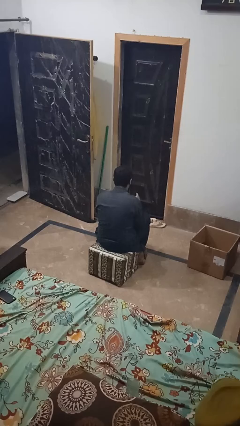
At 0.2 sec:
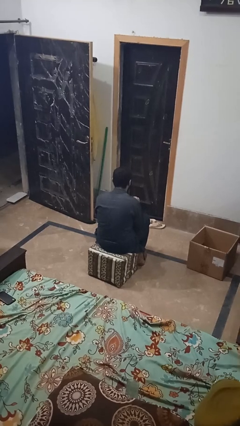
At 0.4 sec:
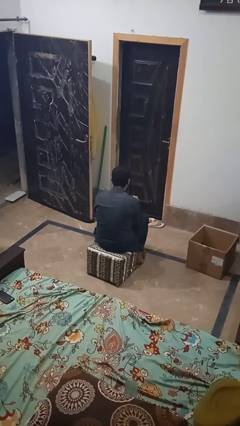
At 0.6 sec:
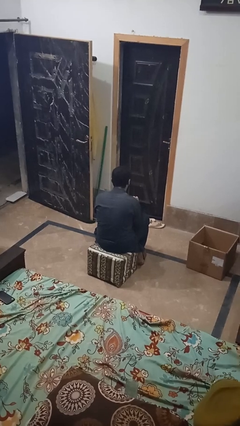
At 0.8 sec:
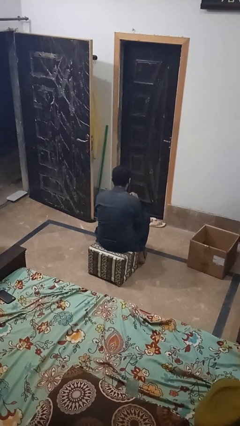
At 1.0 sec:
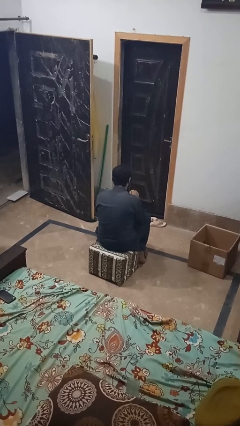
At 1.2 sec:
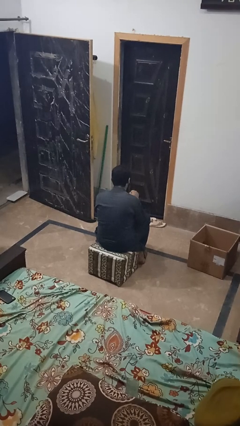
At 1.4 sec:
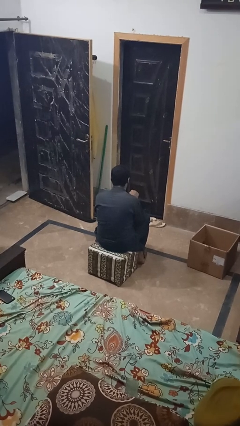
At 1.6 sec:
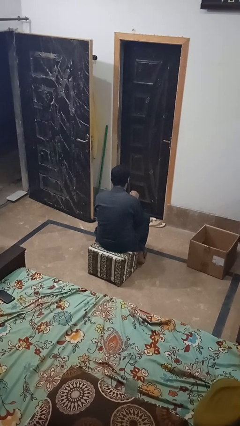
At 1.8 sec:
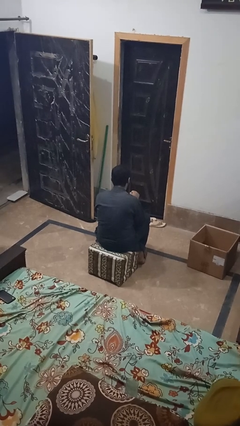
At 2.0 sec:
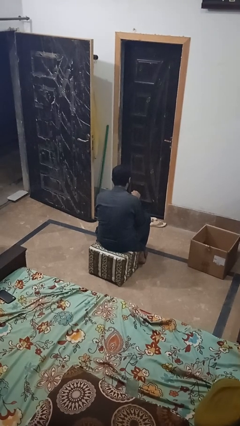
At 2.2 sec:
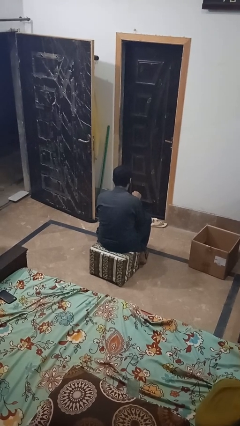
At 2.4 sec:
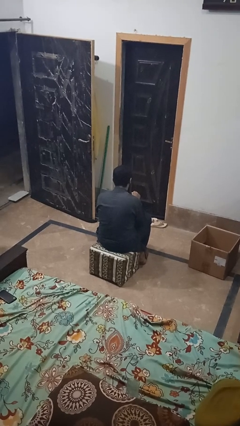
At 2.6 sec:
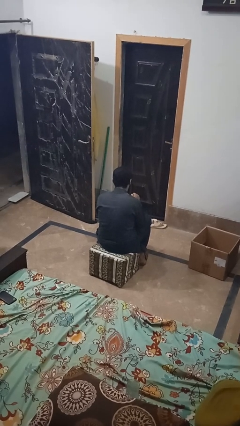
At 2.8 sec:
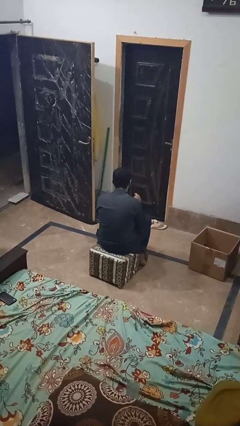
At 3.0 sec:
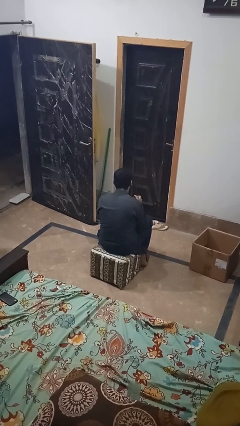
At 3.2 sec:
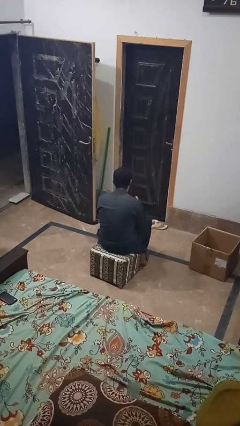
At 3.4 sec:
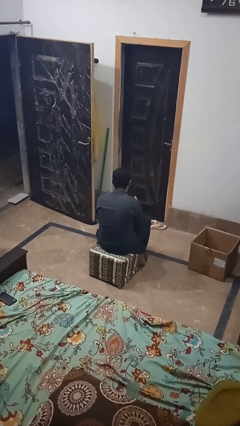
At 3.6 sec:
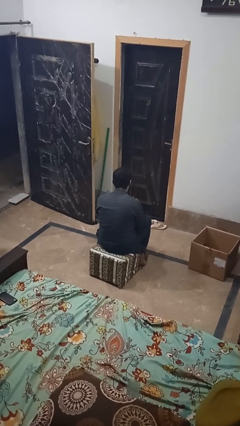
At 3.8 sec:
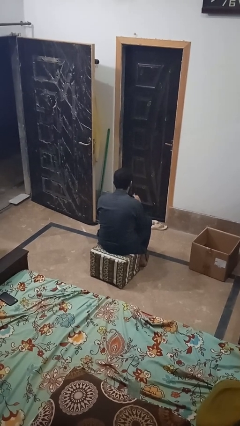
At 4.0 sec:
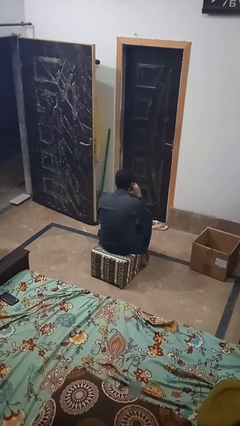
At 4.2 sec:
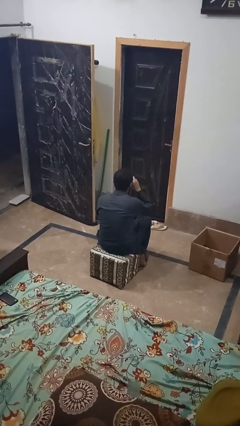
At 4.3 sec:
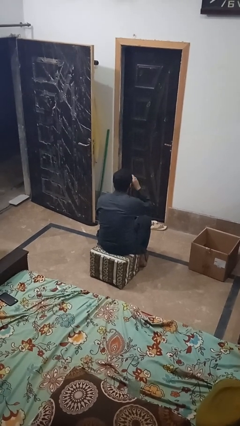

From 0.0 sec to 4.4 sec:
person stirs mug

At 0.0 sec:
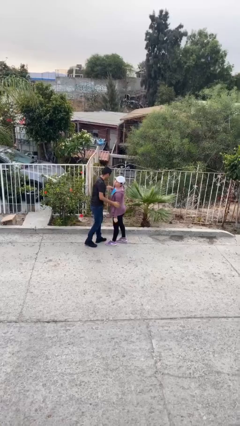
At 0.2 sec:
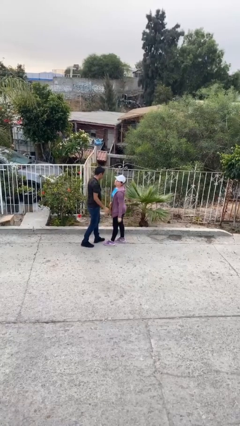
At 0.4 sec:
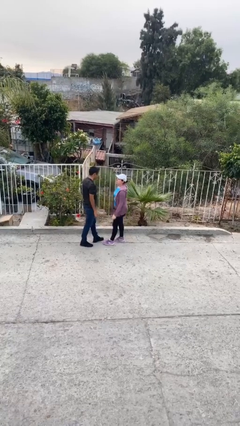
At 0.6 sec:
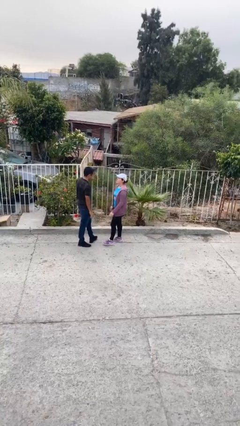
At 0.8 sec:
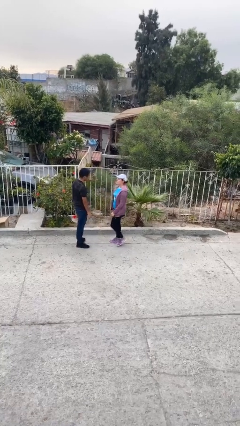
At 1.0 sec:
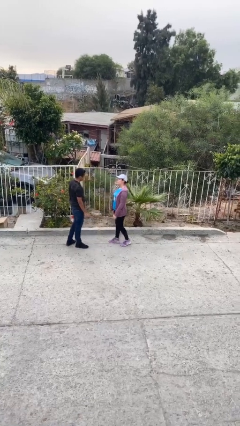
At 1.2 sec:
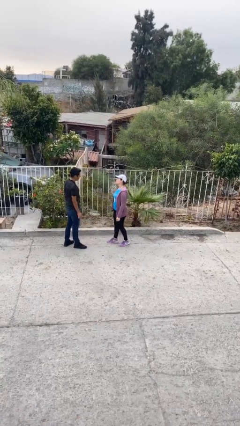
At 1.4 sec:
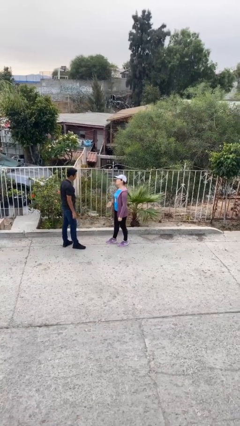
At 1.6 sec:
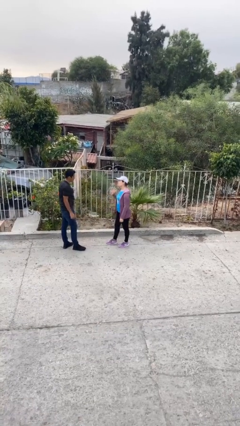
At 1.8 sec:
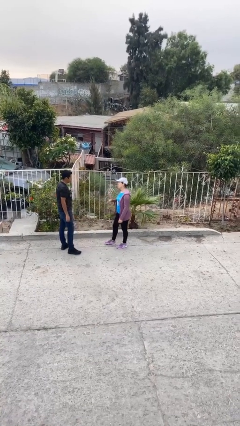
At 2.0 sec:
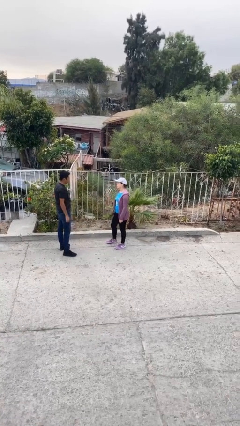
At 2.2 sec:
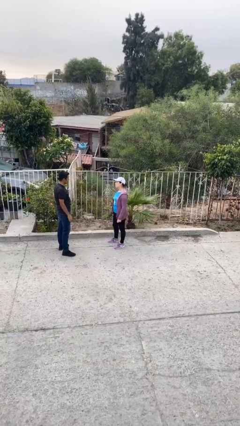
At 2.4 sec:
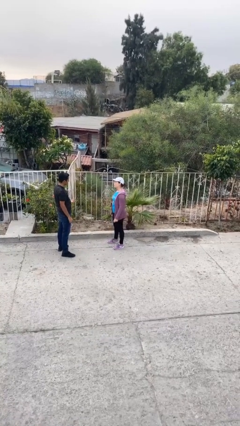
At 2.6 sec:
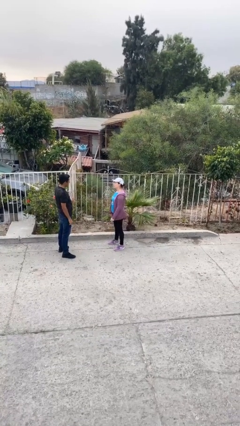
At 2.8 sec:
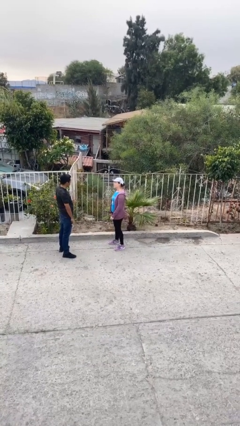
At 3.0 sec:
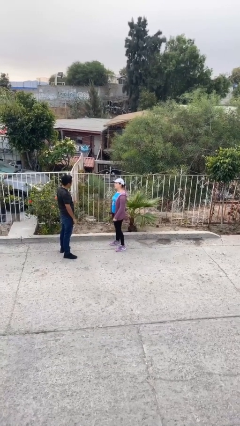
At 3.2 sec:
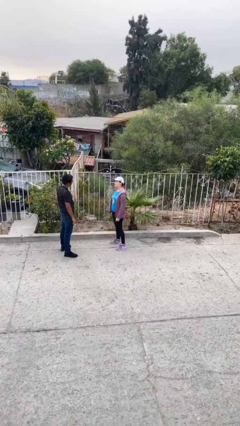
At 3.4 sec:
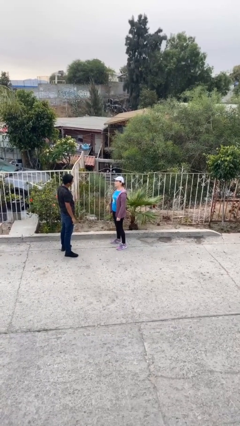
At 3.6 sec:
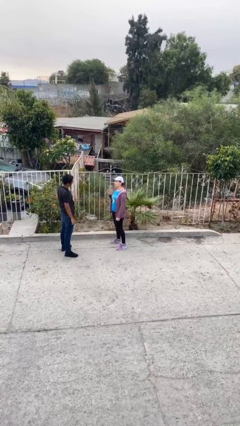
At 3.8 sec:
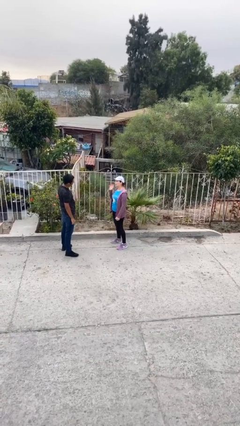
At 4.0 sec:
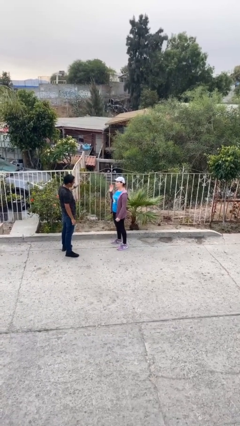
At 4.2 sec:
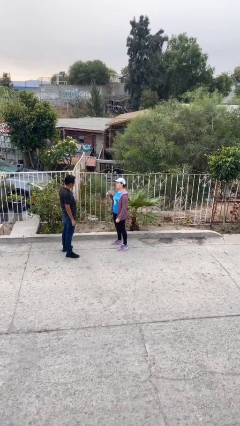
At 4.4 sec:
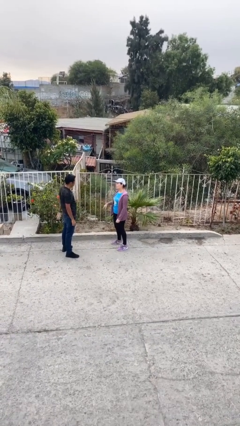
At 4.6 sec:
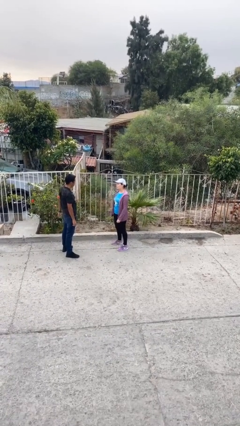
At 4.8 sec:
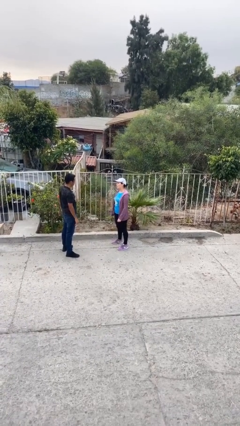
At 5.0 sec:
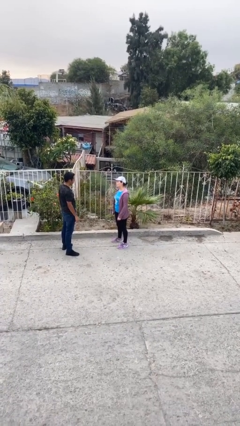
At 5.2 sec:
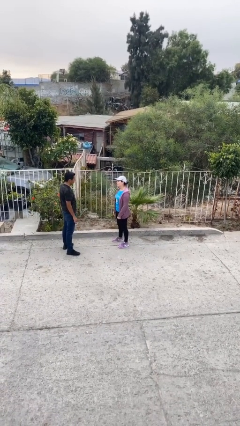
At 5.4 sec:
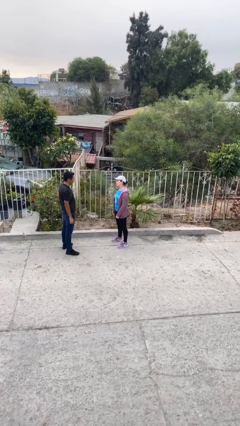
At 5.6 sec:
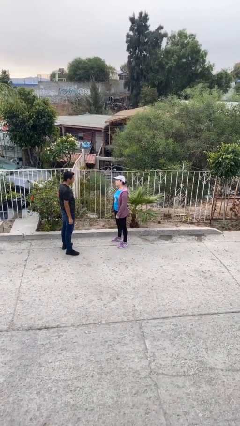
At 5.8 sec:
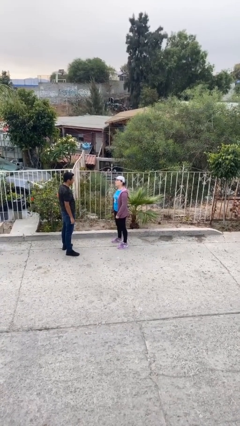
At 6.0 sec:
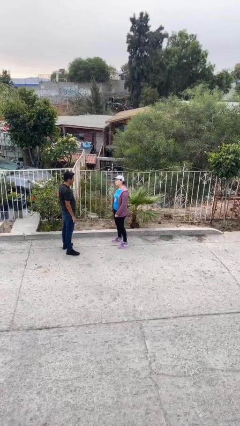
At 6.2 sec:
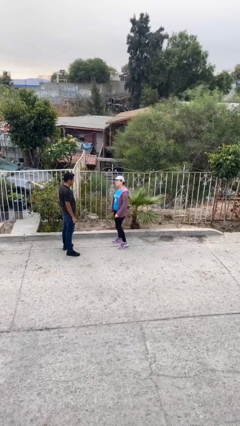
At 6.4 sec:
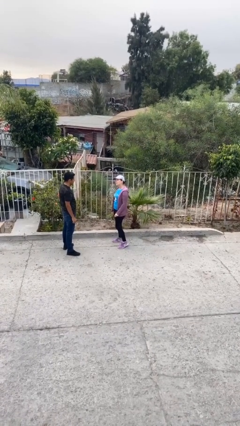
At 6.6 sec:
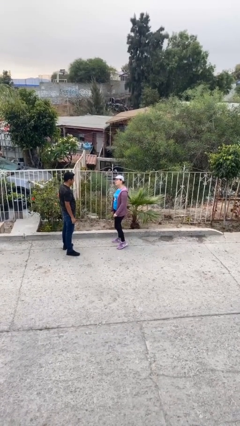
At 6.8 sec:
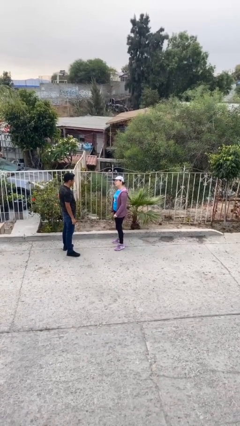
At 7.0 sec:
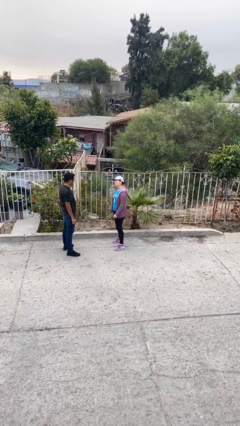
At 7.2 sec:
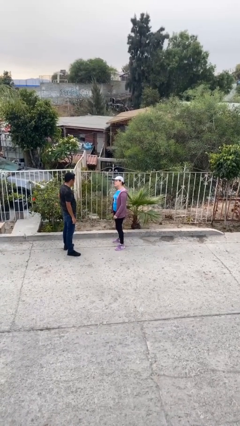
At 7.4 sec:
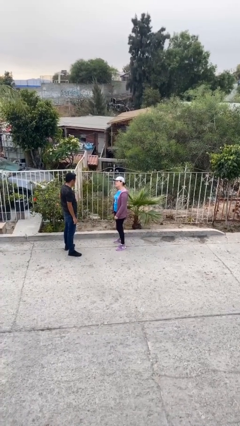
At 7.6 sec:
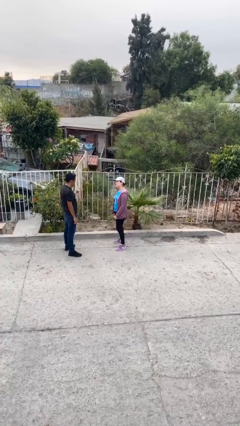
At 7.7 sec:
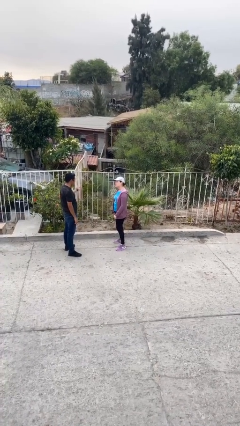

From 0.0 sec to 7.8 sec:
person talks to person

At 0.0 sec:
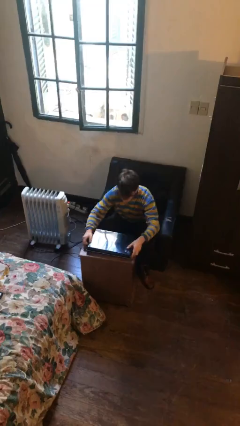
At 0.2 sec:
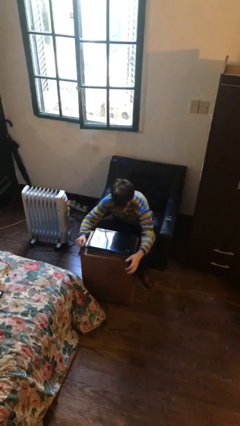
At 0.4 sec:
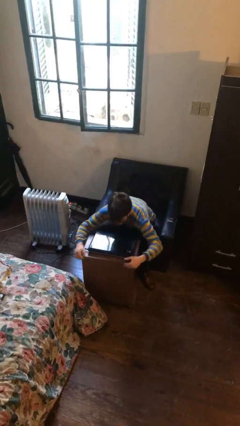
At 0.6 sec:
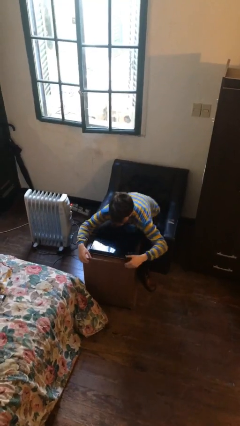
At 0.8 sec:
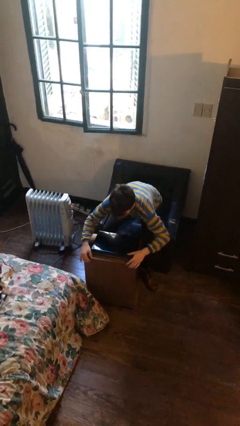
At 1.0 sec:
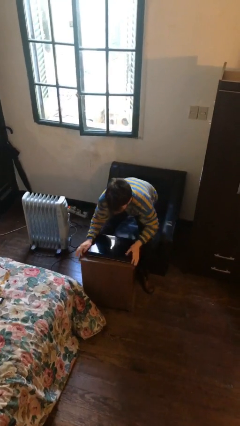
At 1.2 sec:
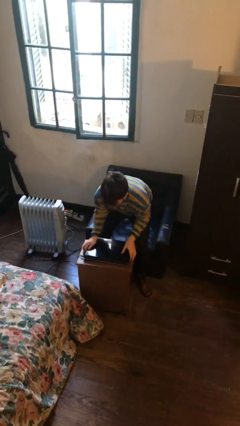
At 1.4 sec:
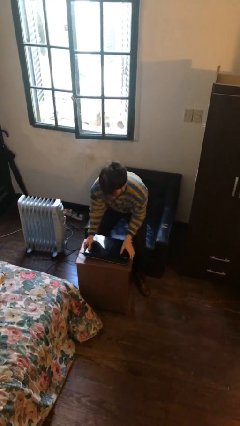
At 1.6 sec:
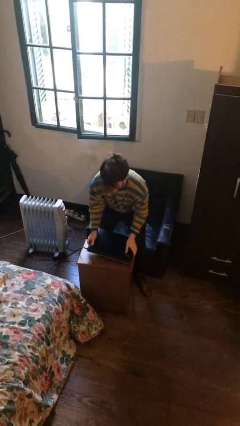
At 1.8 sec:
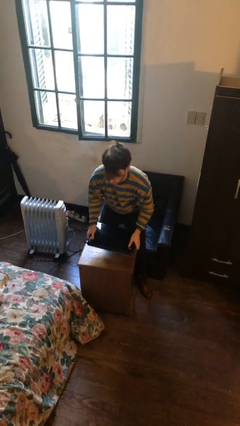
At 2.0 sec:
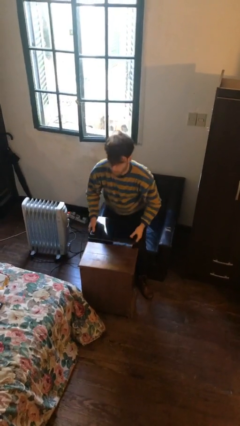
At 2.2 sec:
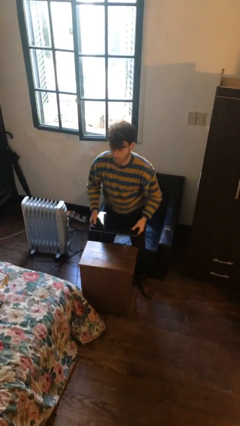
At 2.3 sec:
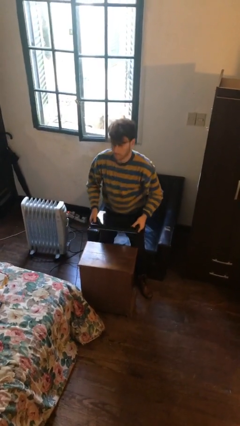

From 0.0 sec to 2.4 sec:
person stands up

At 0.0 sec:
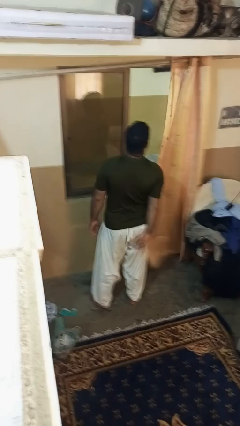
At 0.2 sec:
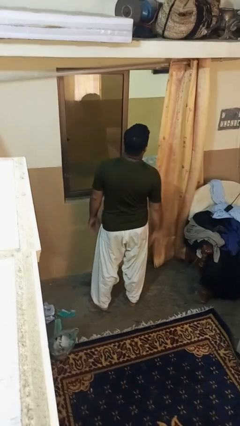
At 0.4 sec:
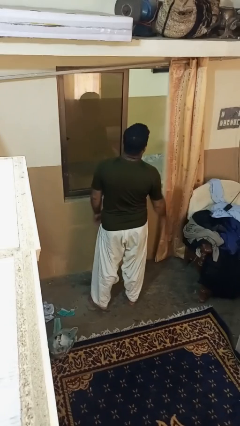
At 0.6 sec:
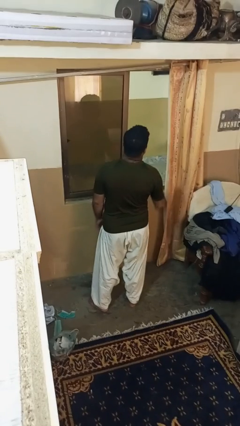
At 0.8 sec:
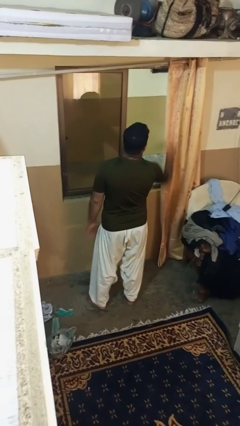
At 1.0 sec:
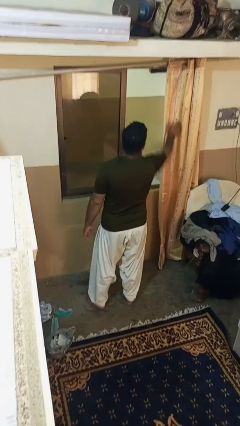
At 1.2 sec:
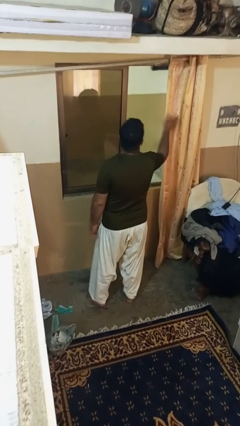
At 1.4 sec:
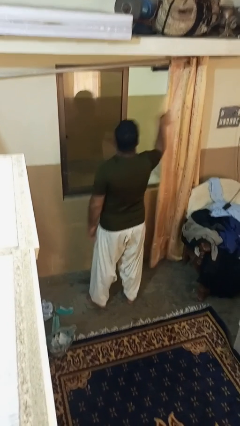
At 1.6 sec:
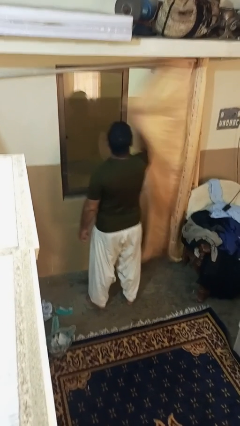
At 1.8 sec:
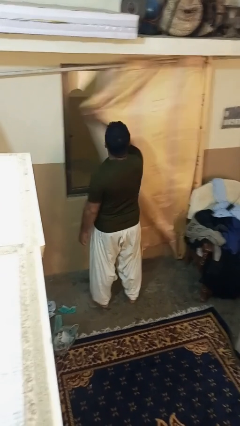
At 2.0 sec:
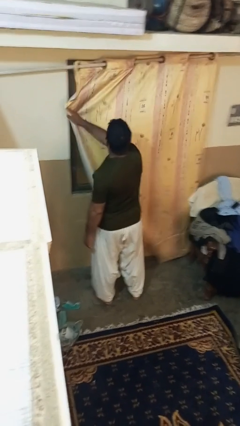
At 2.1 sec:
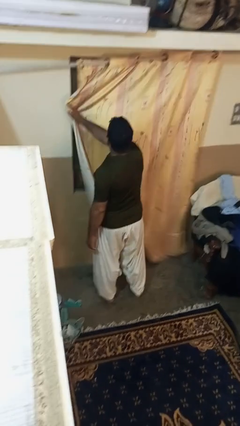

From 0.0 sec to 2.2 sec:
person closes curtains

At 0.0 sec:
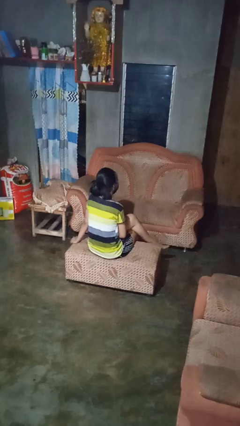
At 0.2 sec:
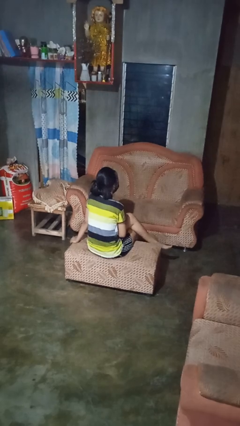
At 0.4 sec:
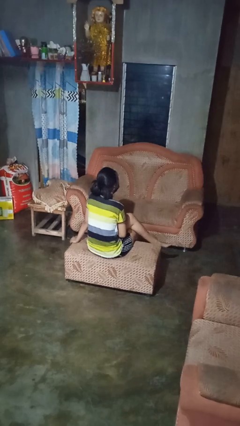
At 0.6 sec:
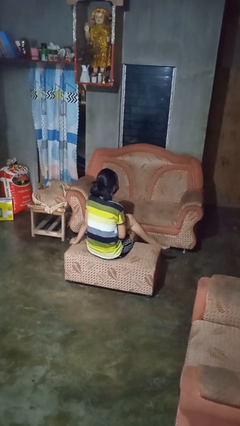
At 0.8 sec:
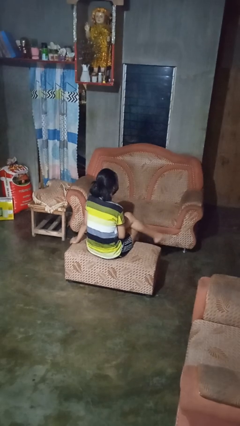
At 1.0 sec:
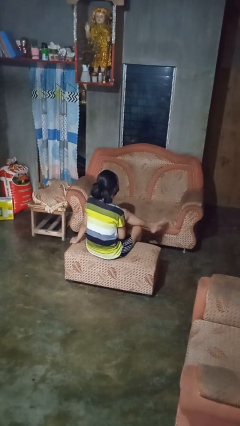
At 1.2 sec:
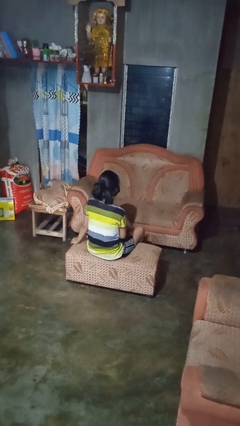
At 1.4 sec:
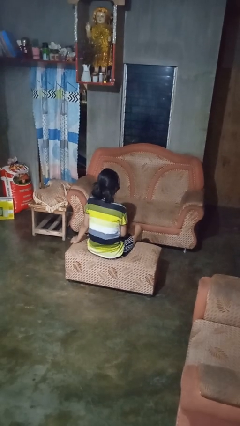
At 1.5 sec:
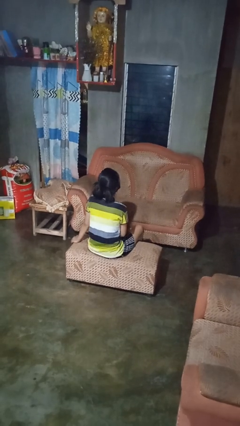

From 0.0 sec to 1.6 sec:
person crosses legs
